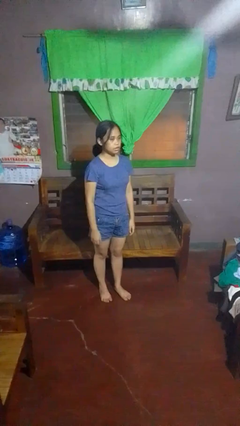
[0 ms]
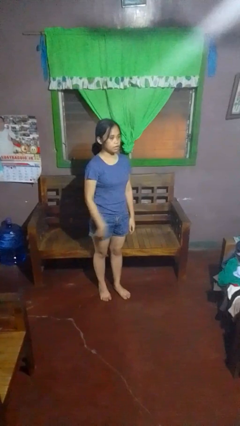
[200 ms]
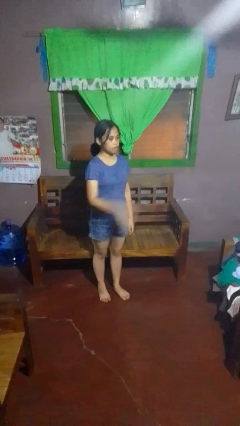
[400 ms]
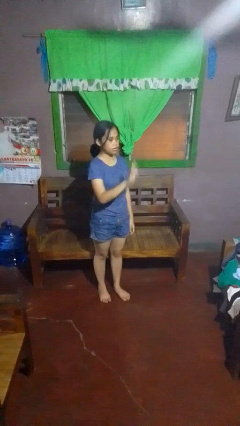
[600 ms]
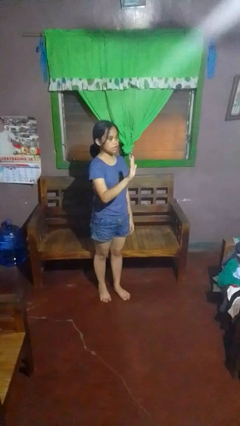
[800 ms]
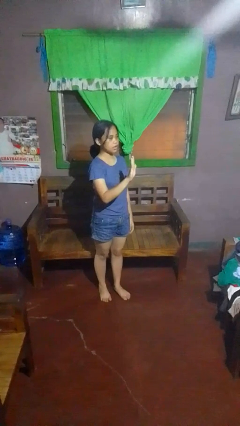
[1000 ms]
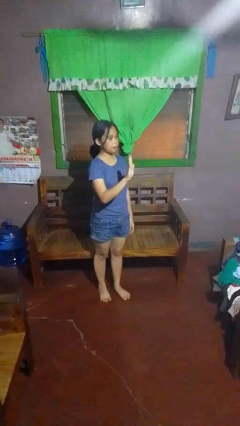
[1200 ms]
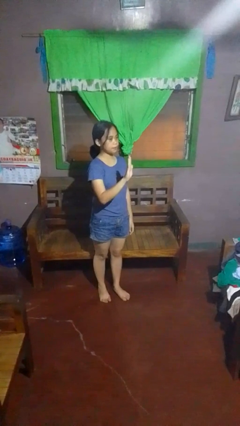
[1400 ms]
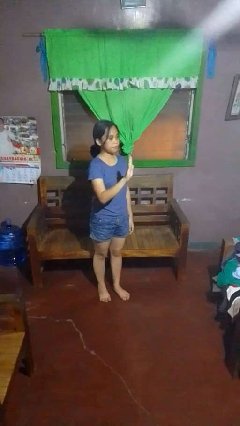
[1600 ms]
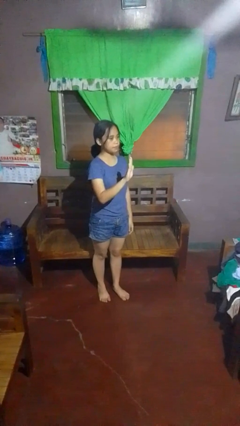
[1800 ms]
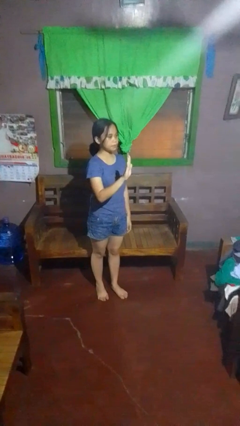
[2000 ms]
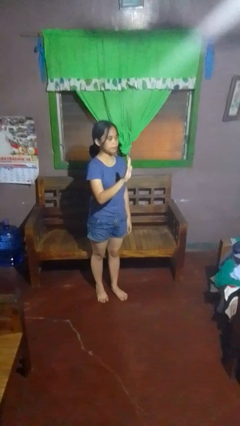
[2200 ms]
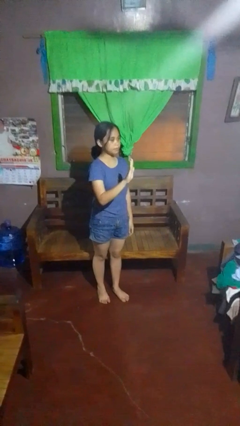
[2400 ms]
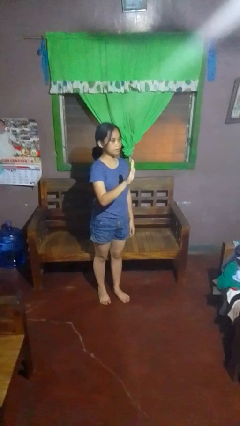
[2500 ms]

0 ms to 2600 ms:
person gestures stop

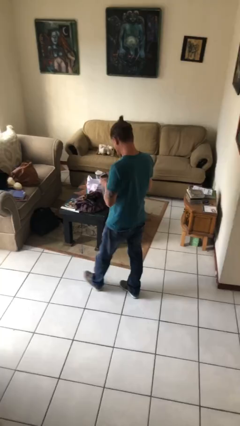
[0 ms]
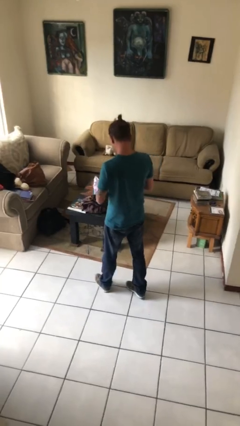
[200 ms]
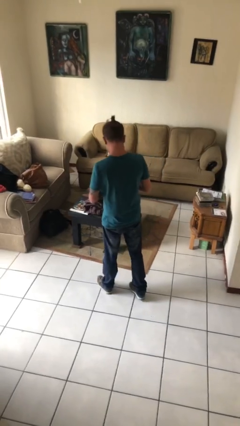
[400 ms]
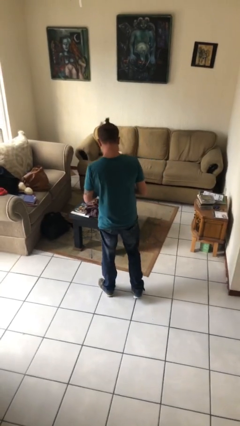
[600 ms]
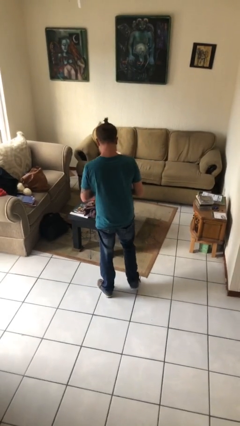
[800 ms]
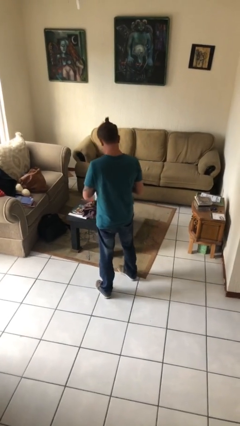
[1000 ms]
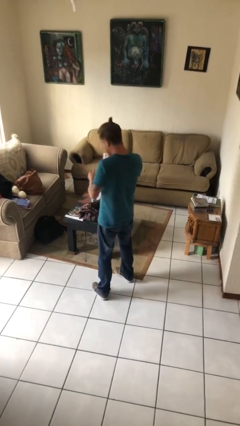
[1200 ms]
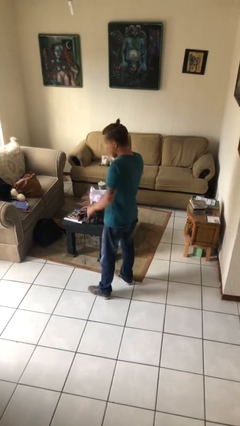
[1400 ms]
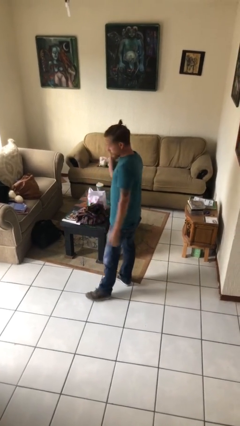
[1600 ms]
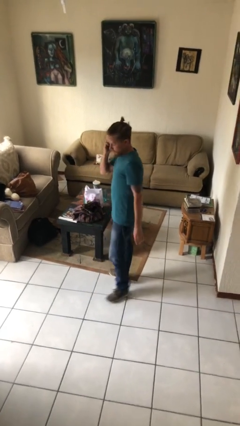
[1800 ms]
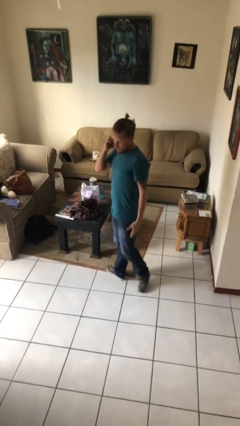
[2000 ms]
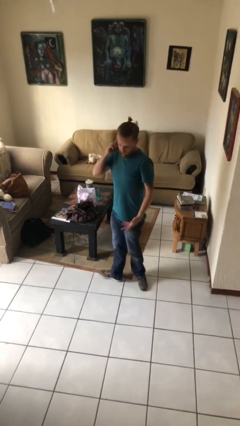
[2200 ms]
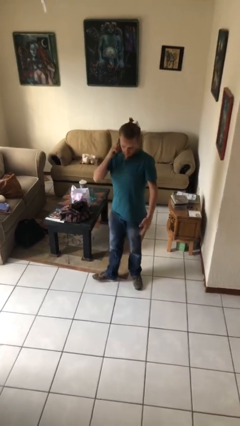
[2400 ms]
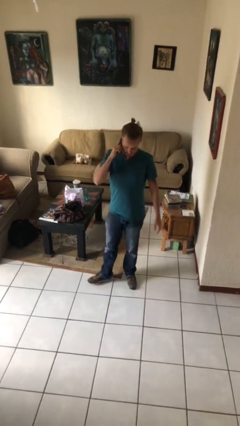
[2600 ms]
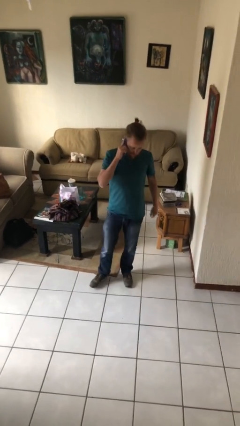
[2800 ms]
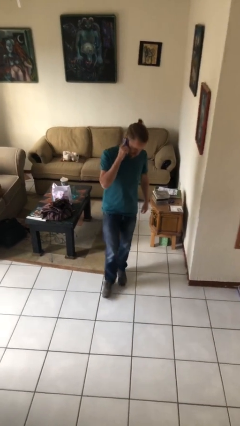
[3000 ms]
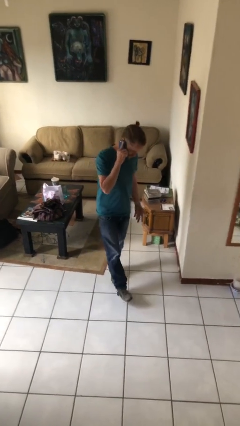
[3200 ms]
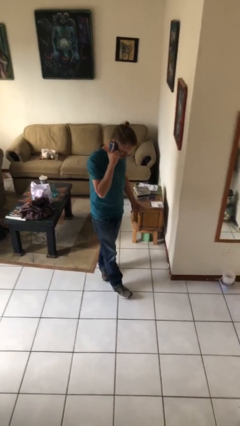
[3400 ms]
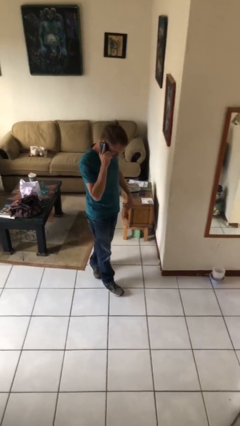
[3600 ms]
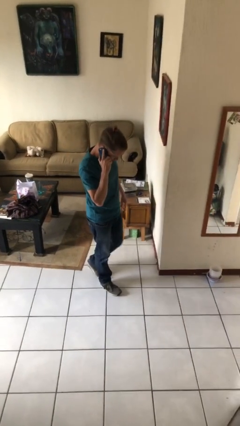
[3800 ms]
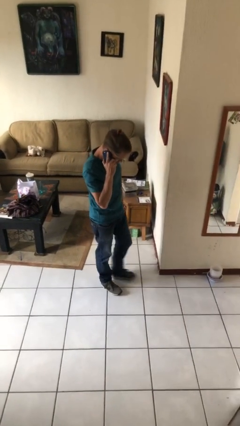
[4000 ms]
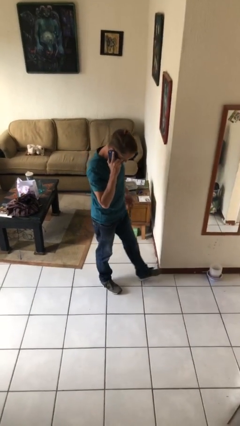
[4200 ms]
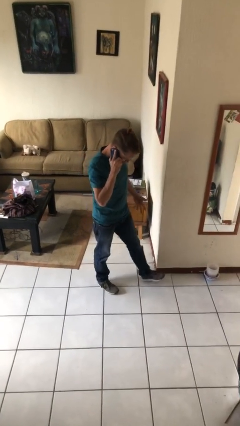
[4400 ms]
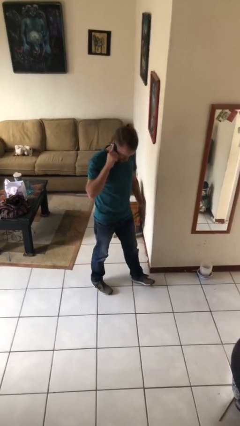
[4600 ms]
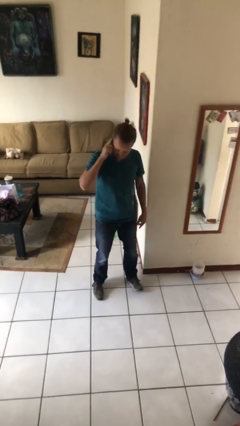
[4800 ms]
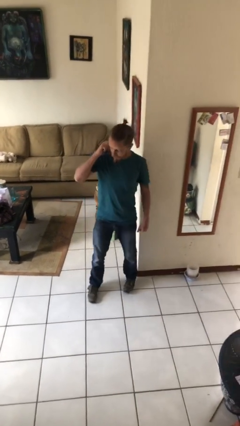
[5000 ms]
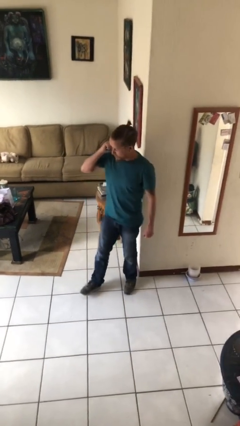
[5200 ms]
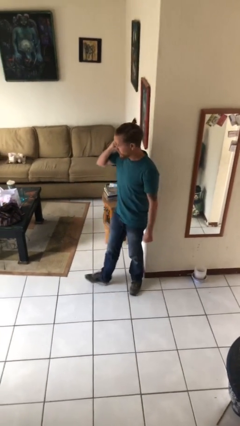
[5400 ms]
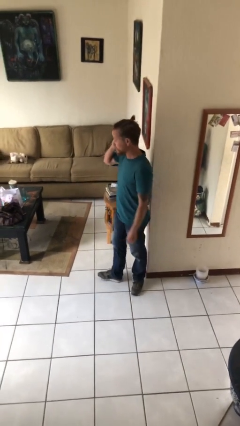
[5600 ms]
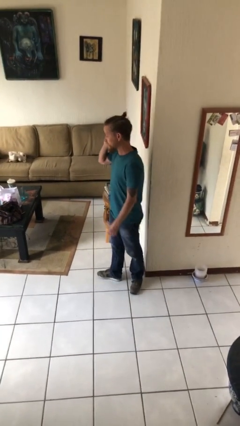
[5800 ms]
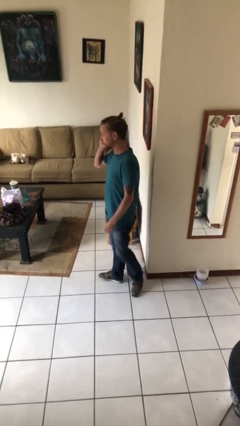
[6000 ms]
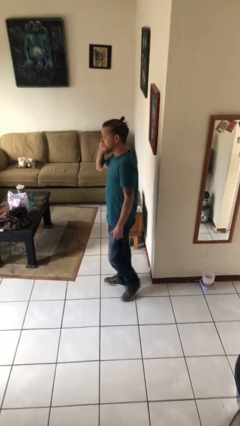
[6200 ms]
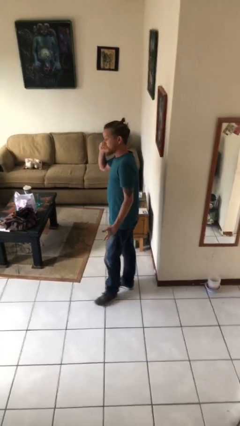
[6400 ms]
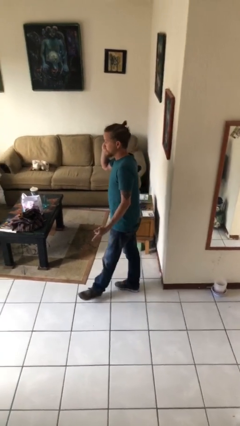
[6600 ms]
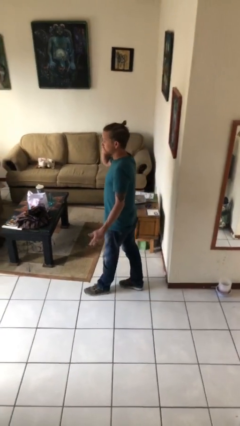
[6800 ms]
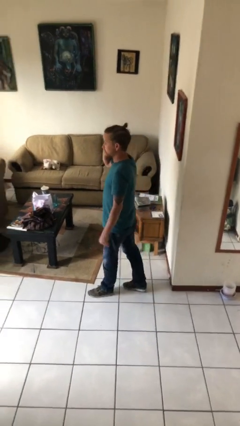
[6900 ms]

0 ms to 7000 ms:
person talks on phone

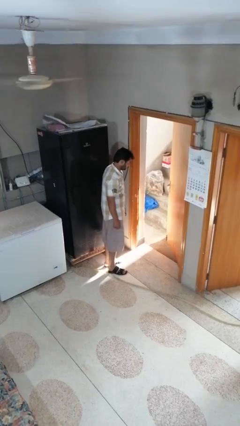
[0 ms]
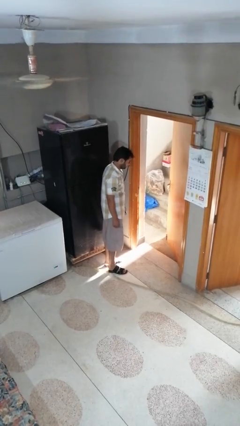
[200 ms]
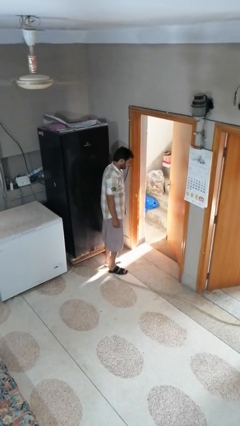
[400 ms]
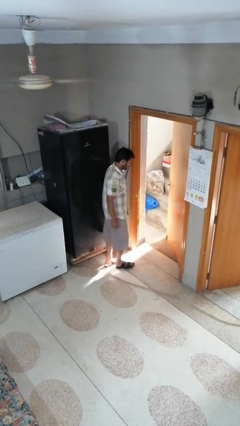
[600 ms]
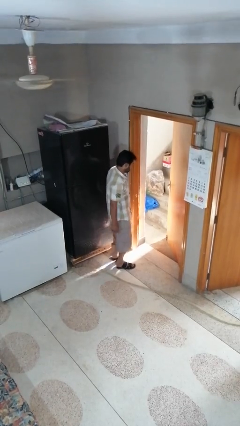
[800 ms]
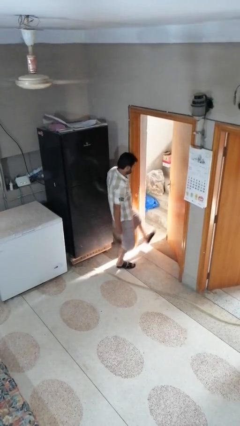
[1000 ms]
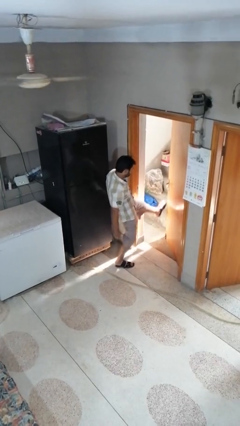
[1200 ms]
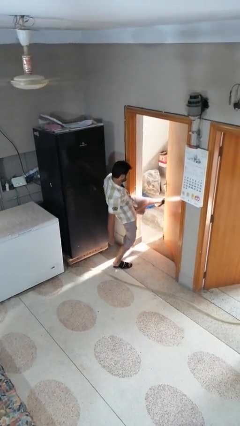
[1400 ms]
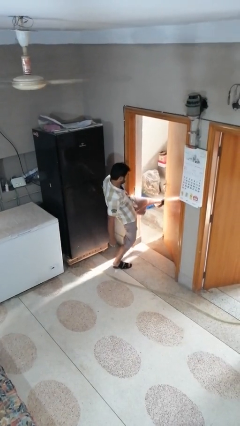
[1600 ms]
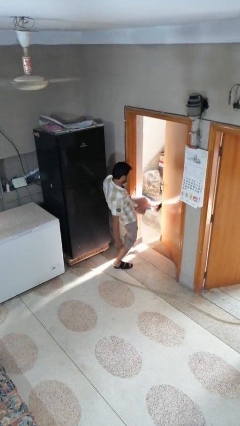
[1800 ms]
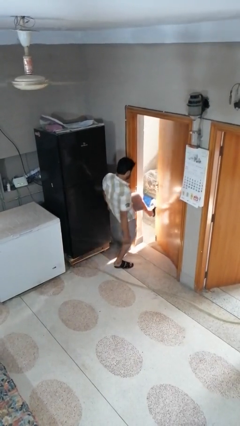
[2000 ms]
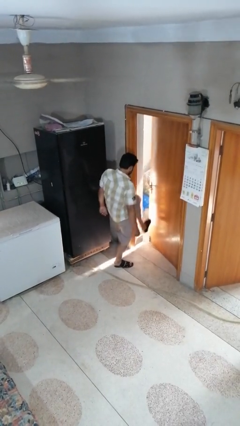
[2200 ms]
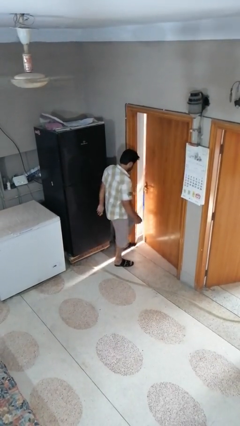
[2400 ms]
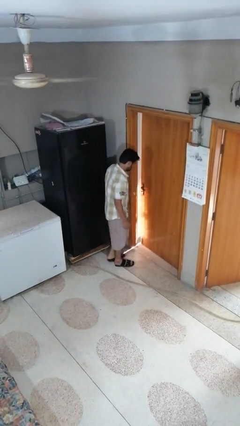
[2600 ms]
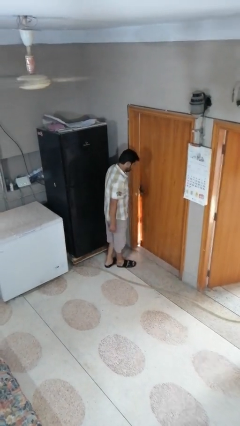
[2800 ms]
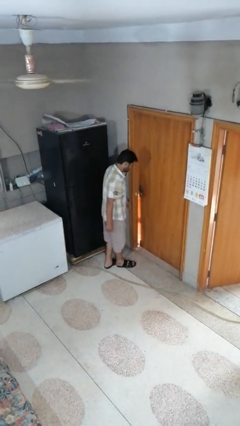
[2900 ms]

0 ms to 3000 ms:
person closes door with foot

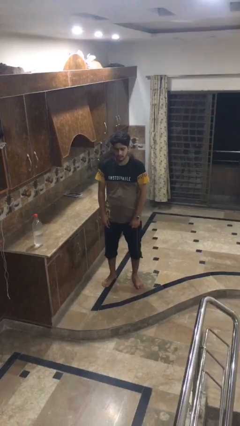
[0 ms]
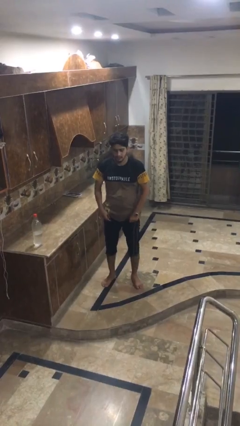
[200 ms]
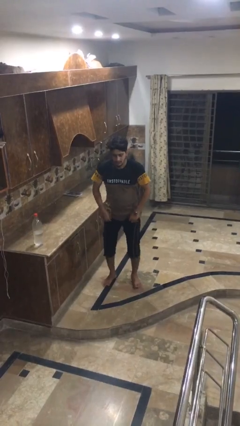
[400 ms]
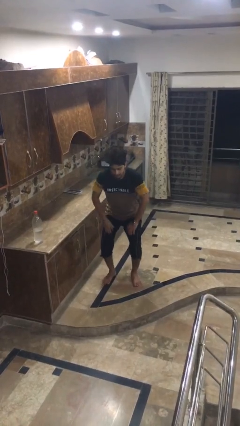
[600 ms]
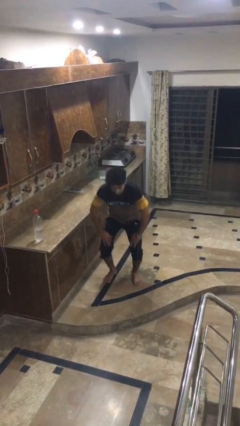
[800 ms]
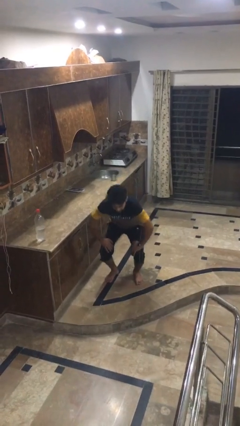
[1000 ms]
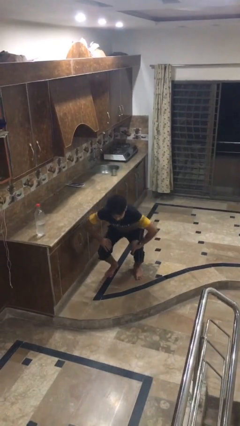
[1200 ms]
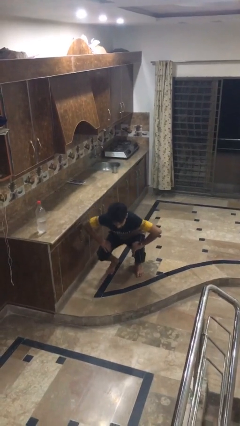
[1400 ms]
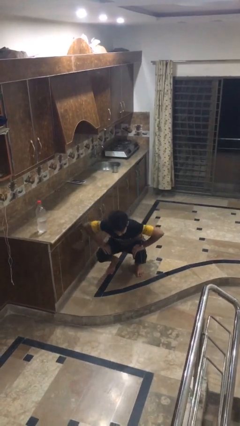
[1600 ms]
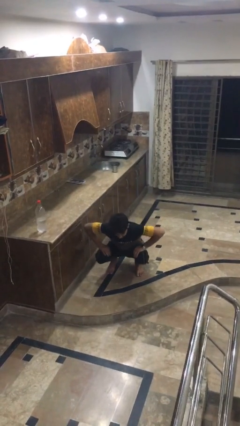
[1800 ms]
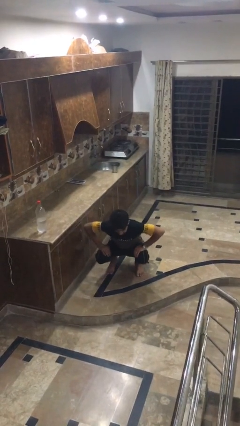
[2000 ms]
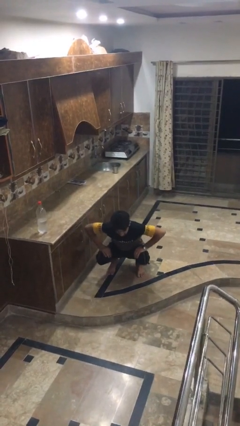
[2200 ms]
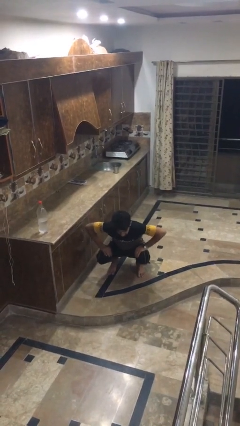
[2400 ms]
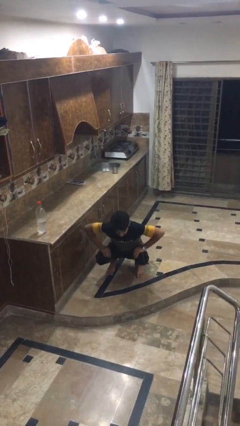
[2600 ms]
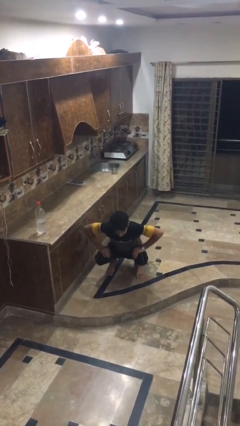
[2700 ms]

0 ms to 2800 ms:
person squats

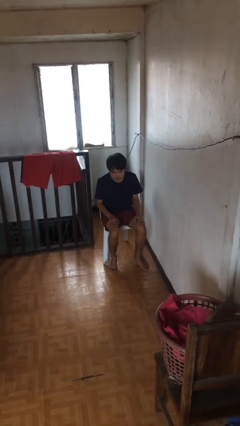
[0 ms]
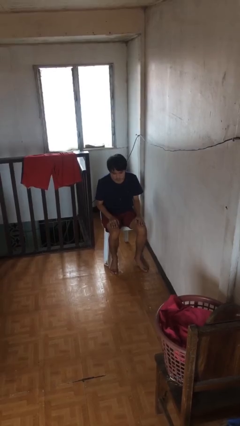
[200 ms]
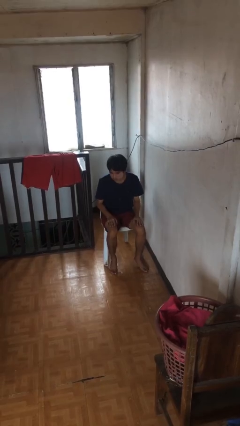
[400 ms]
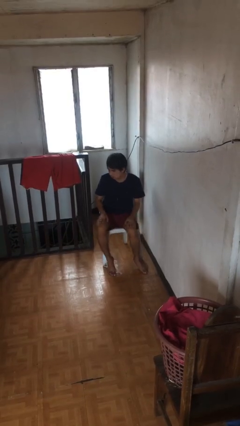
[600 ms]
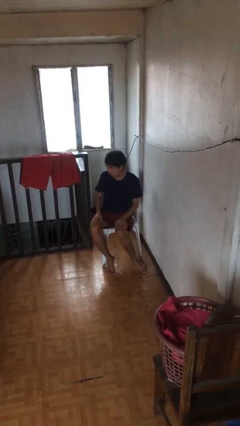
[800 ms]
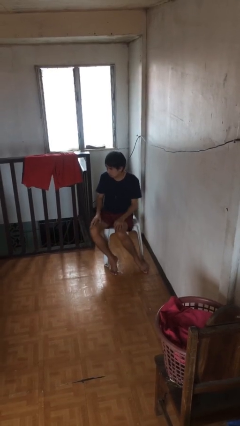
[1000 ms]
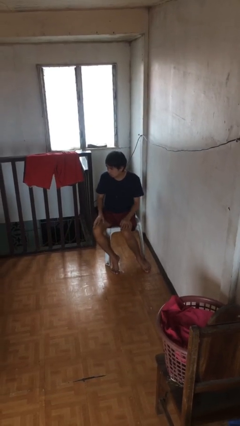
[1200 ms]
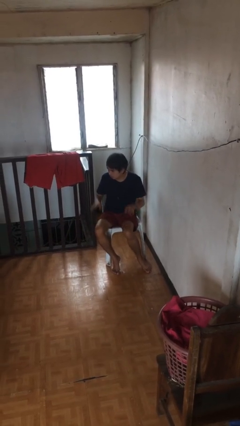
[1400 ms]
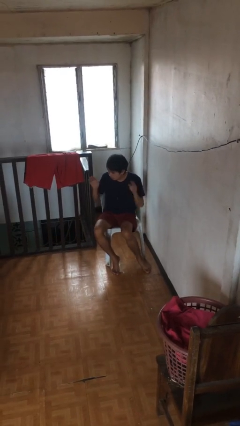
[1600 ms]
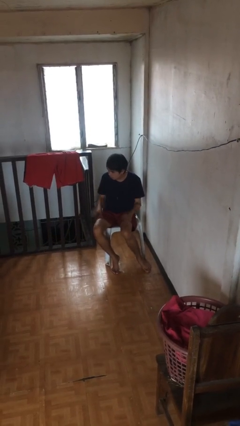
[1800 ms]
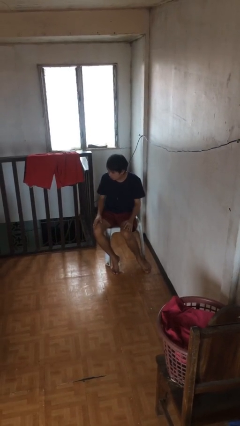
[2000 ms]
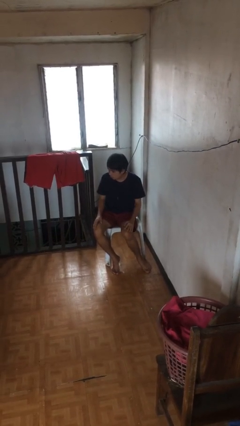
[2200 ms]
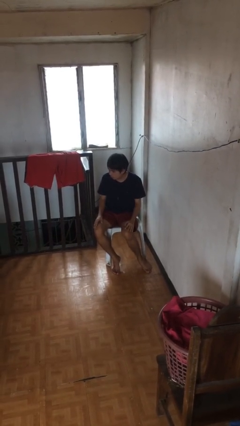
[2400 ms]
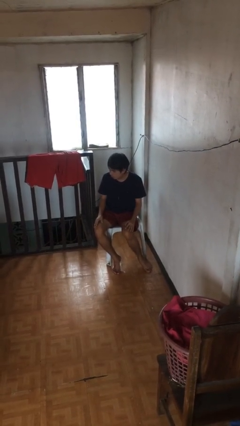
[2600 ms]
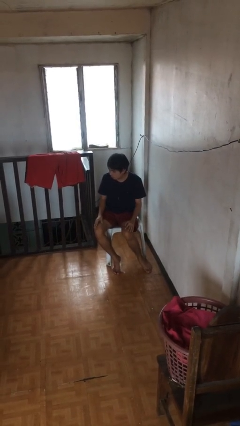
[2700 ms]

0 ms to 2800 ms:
person slaps hands on thighs
